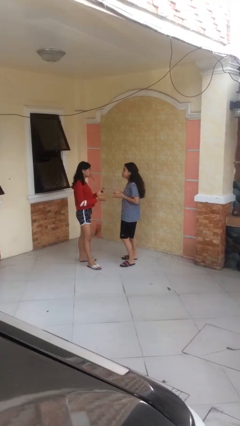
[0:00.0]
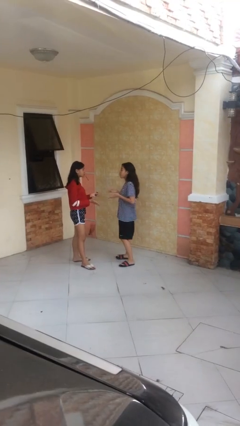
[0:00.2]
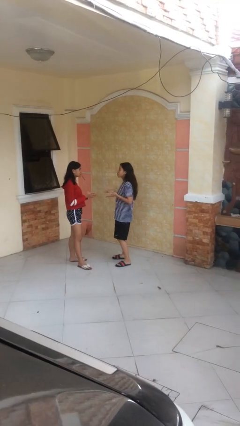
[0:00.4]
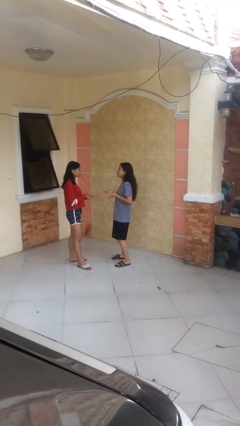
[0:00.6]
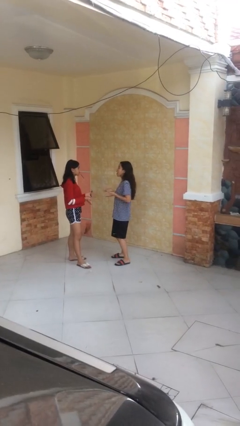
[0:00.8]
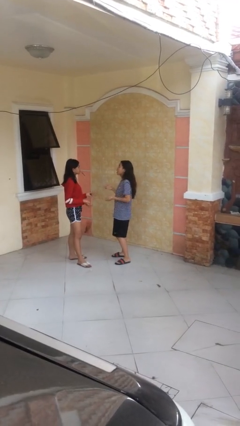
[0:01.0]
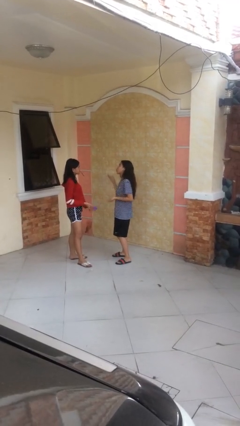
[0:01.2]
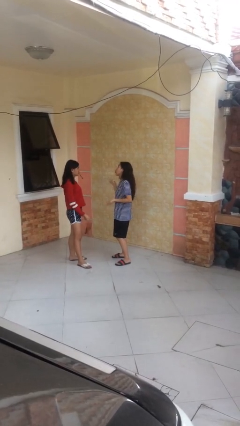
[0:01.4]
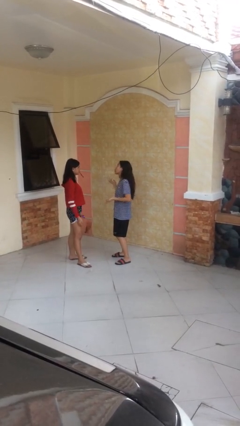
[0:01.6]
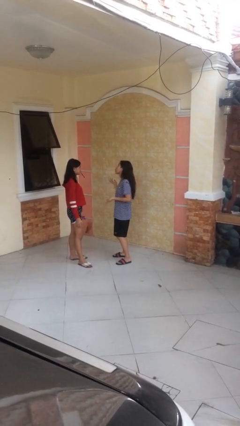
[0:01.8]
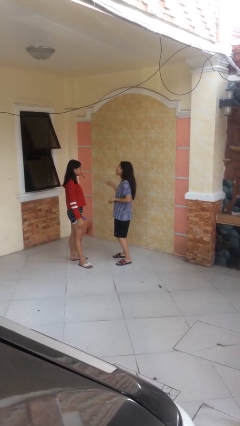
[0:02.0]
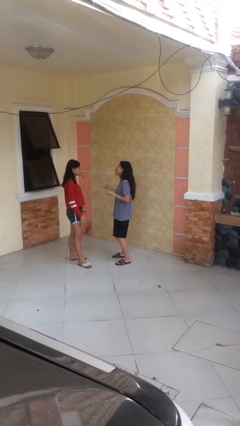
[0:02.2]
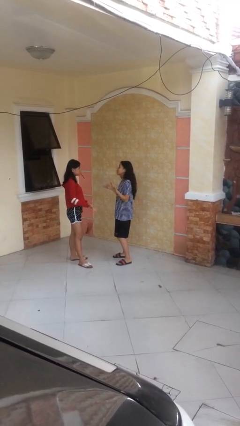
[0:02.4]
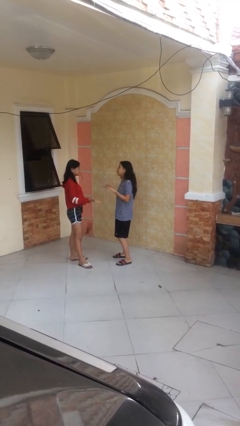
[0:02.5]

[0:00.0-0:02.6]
person talks to person

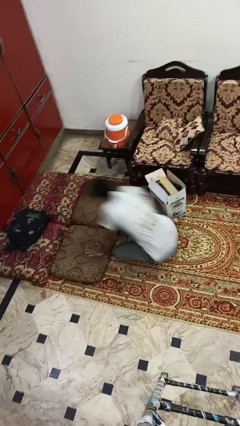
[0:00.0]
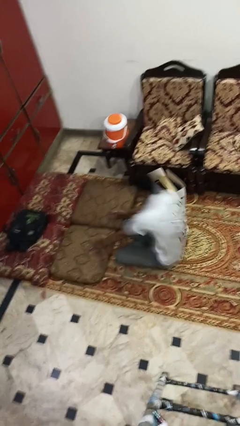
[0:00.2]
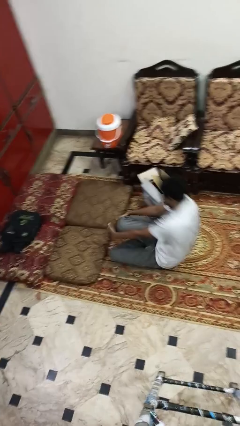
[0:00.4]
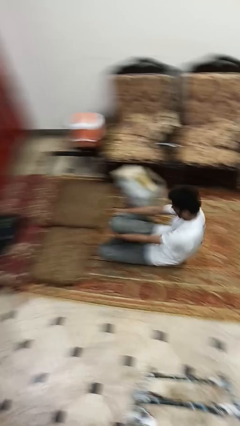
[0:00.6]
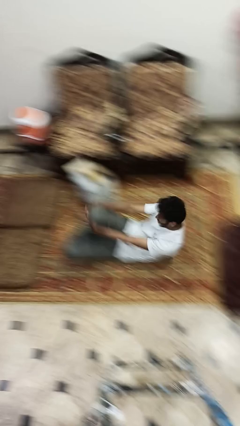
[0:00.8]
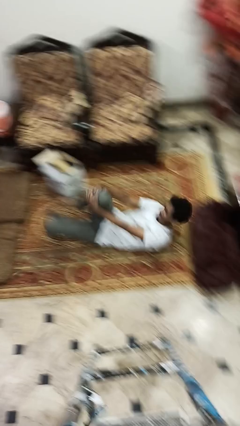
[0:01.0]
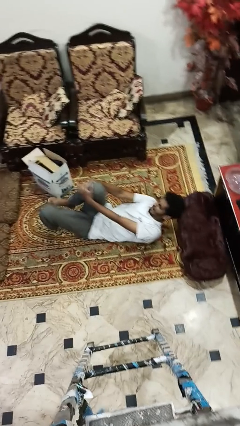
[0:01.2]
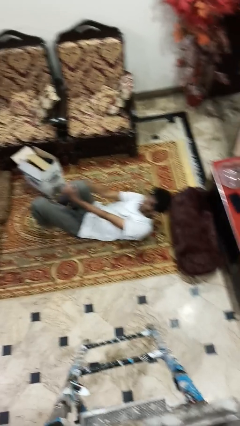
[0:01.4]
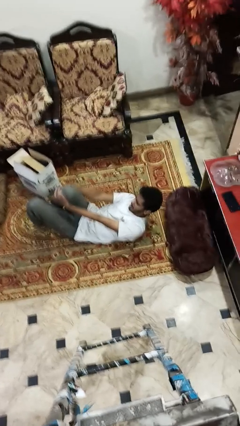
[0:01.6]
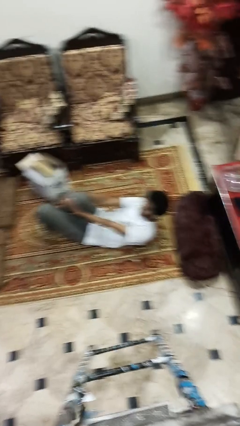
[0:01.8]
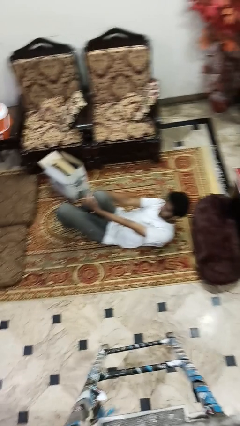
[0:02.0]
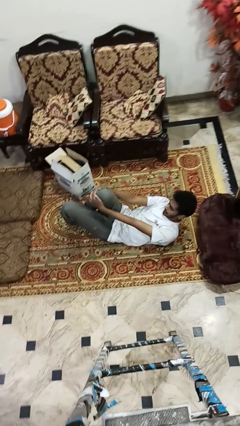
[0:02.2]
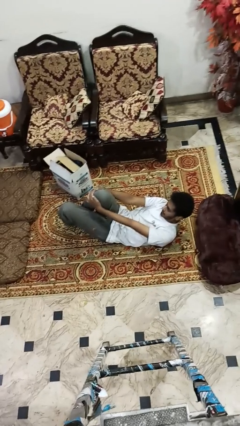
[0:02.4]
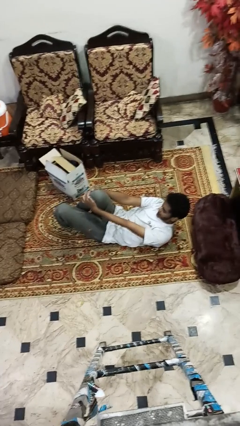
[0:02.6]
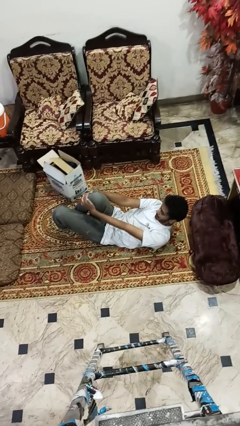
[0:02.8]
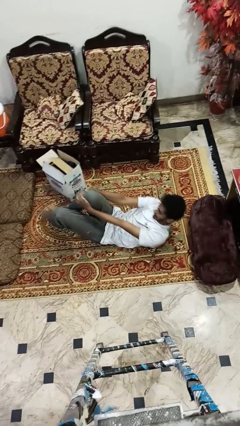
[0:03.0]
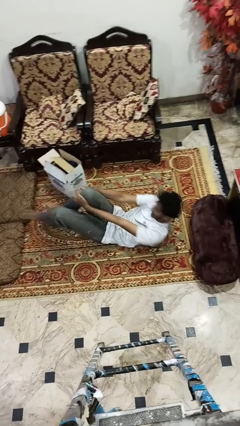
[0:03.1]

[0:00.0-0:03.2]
person lies down on floor

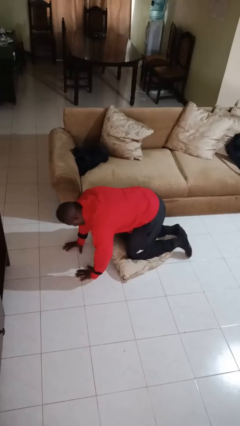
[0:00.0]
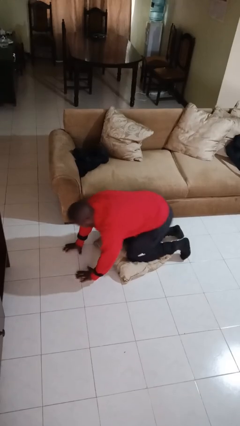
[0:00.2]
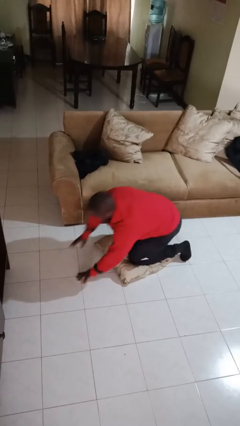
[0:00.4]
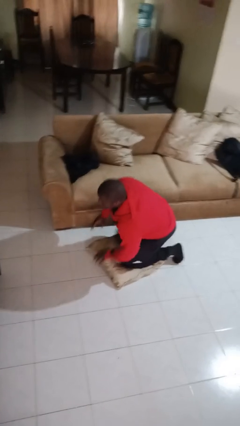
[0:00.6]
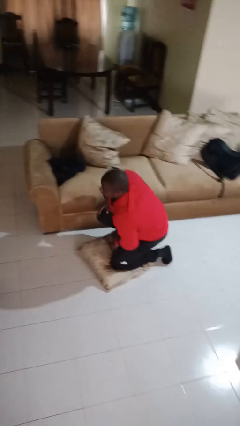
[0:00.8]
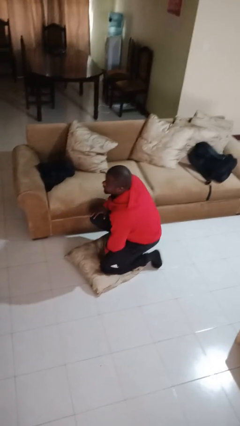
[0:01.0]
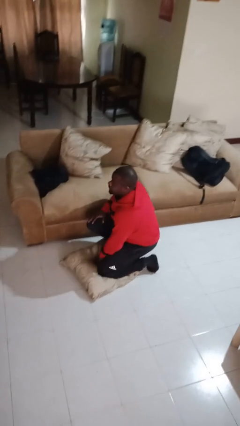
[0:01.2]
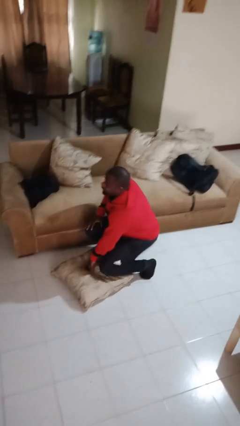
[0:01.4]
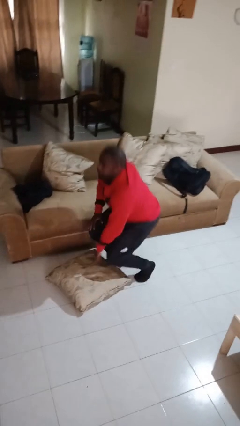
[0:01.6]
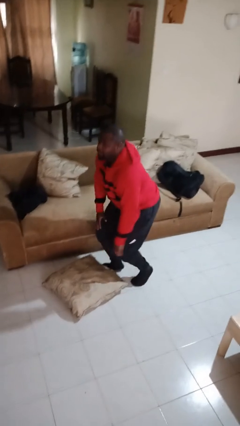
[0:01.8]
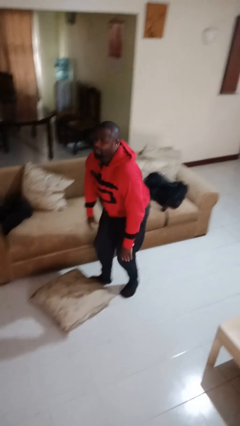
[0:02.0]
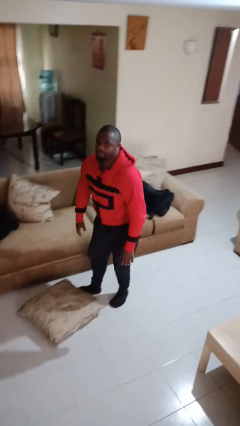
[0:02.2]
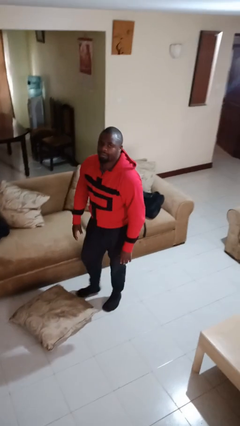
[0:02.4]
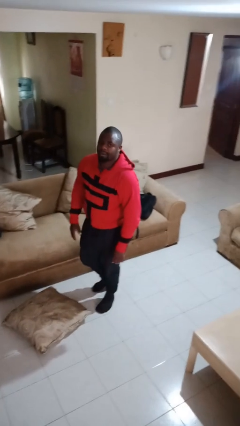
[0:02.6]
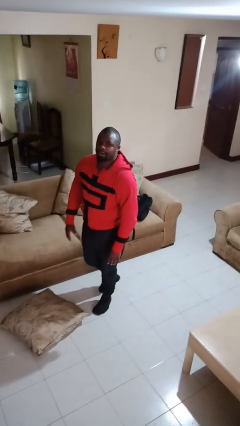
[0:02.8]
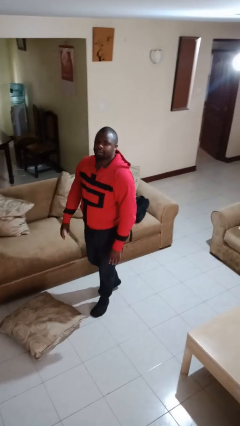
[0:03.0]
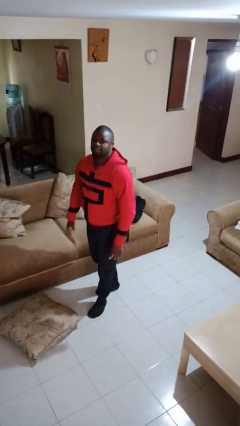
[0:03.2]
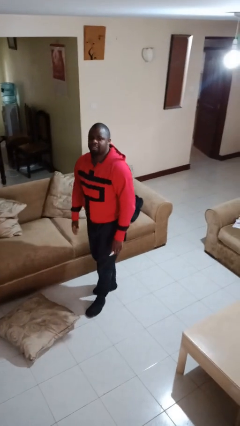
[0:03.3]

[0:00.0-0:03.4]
person stands up from floor

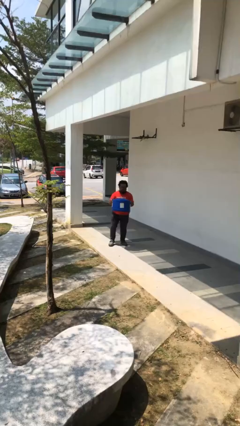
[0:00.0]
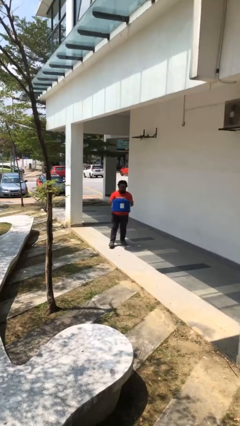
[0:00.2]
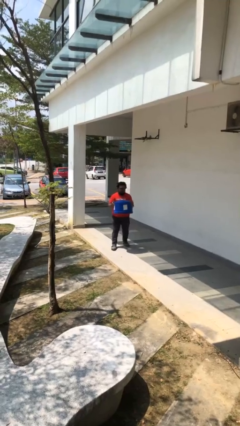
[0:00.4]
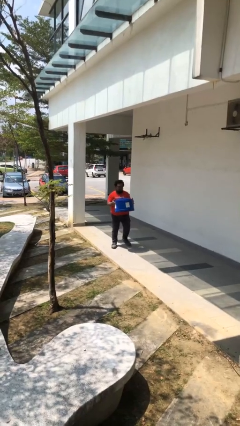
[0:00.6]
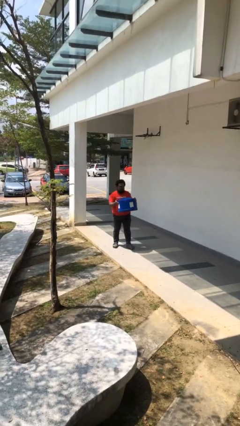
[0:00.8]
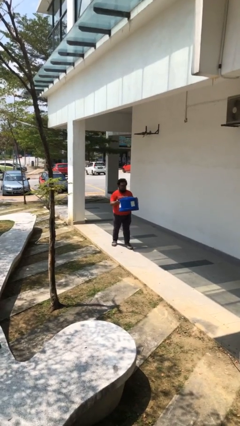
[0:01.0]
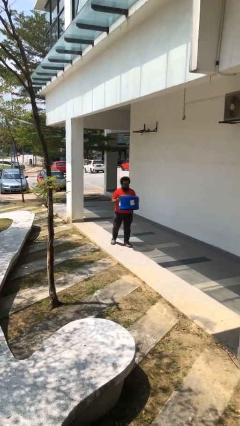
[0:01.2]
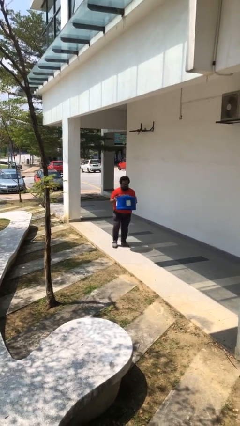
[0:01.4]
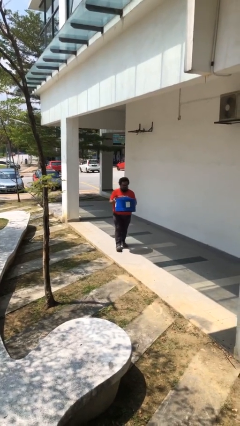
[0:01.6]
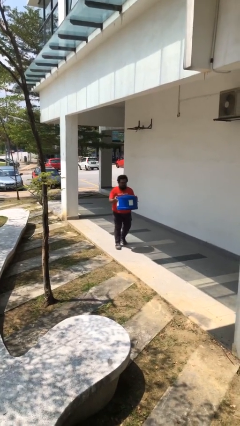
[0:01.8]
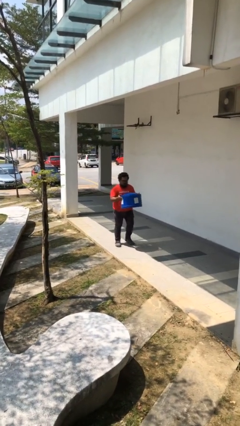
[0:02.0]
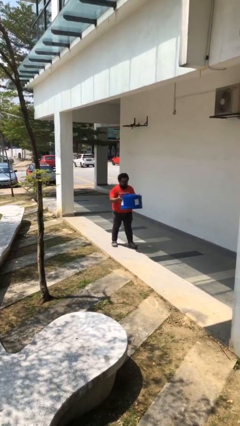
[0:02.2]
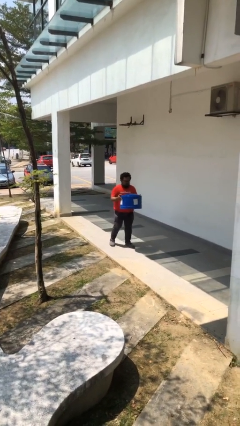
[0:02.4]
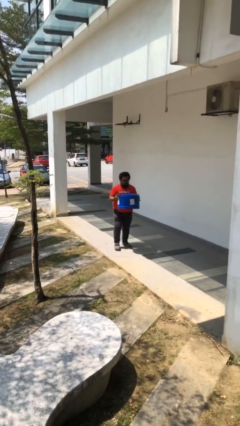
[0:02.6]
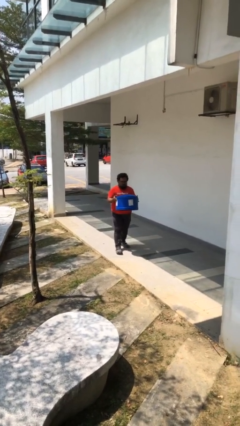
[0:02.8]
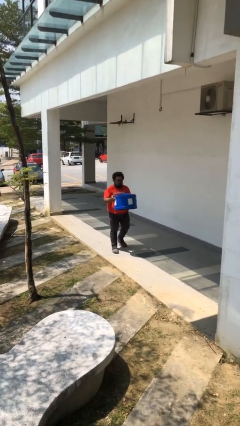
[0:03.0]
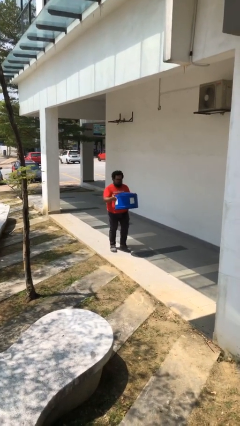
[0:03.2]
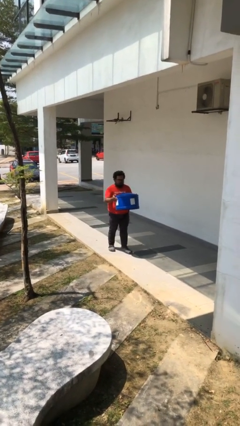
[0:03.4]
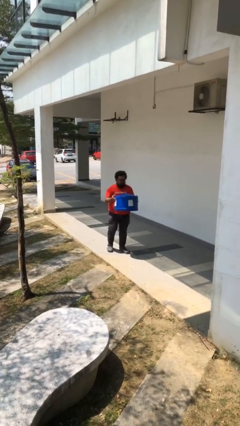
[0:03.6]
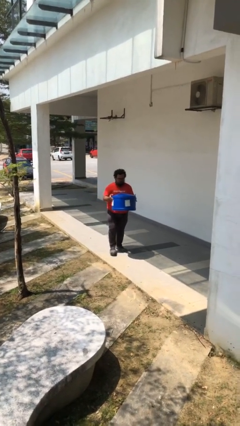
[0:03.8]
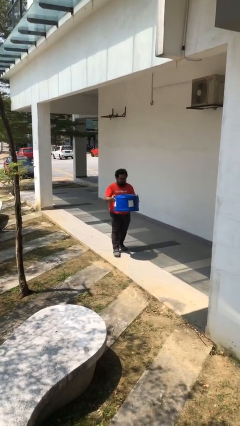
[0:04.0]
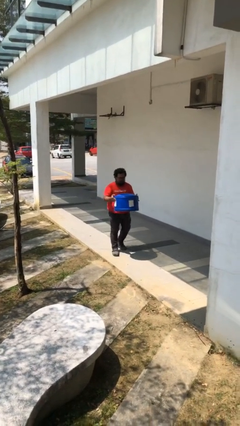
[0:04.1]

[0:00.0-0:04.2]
person carries heavy object

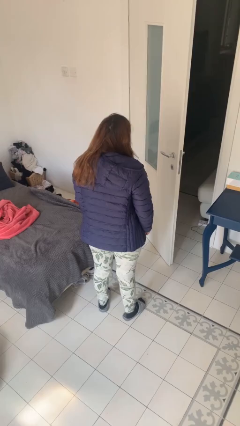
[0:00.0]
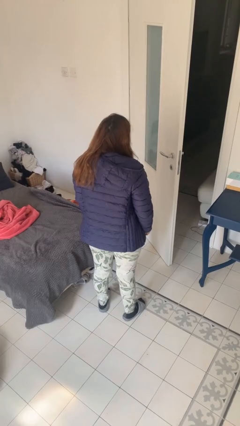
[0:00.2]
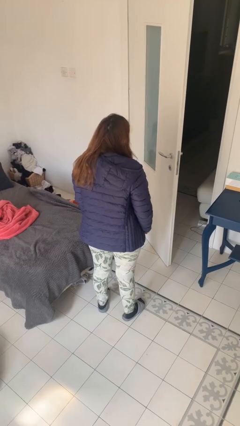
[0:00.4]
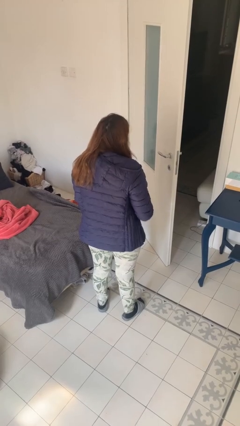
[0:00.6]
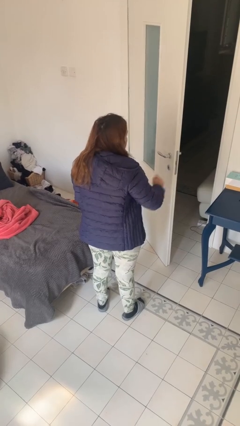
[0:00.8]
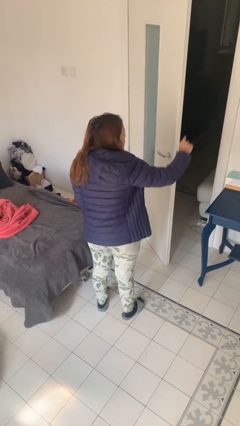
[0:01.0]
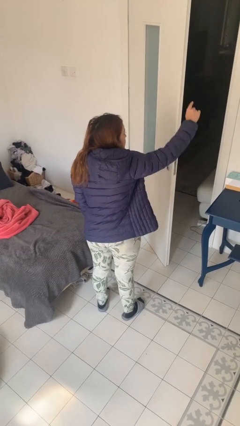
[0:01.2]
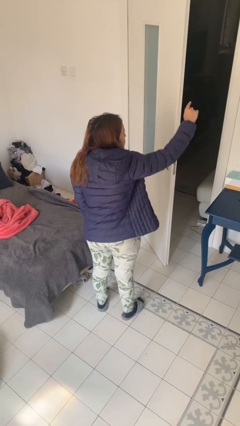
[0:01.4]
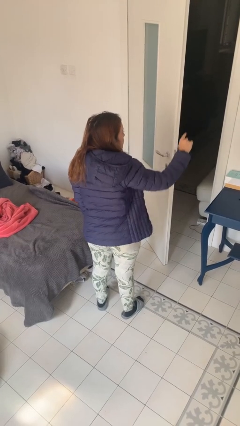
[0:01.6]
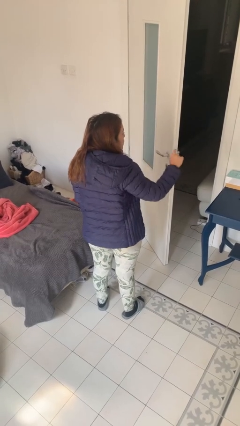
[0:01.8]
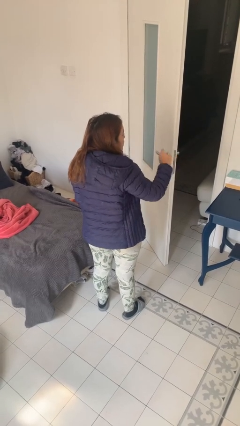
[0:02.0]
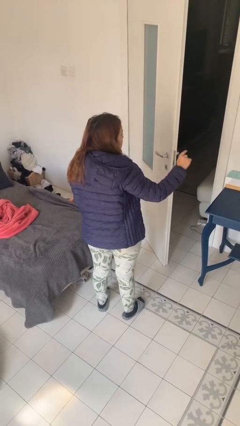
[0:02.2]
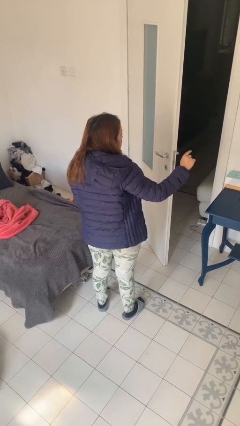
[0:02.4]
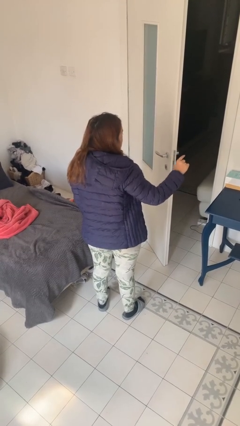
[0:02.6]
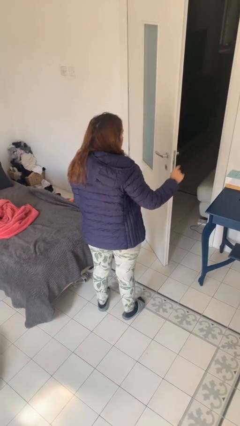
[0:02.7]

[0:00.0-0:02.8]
person gestures number one

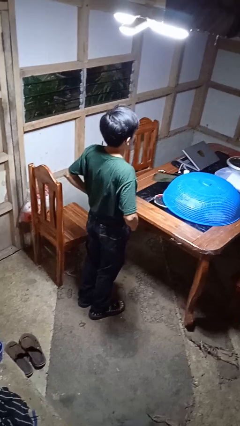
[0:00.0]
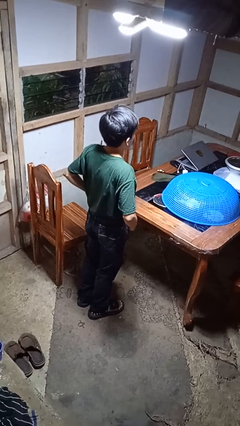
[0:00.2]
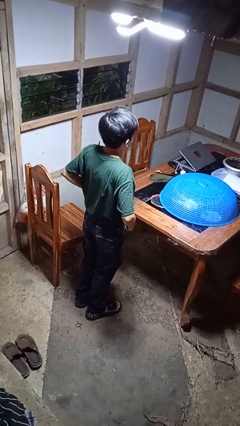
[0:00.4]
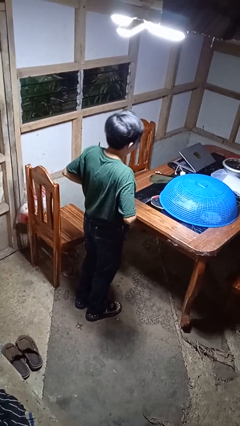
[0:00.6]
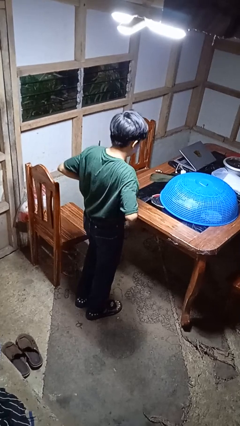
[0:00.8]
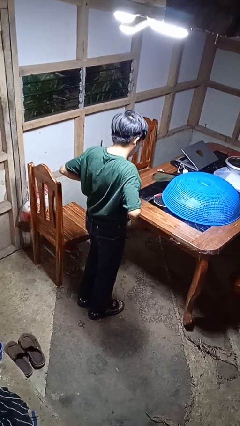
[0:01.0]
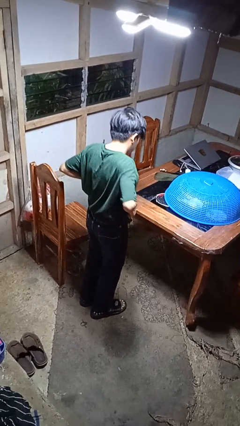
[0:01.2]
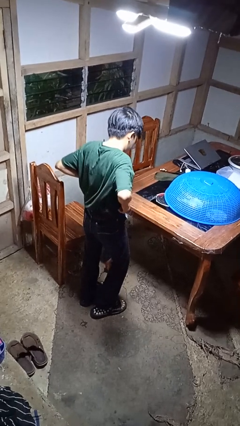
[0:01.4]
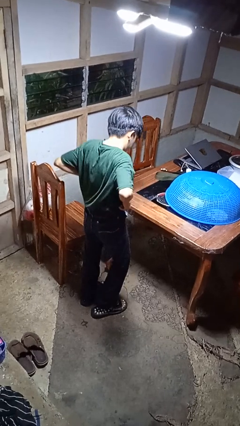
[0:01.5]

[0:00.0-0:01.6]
person hikes up pants
